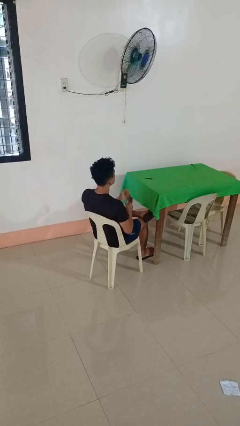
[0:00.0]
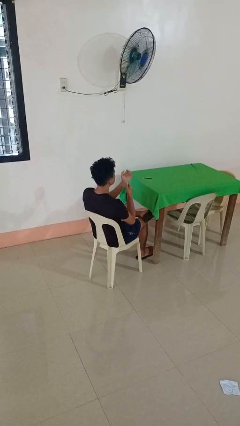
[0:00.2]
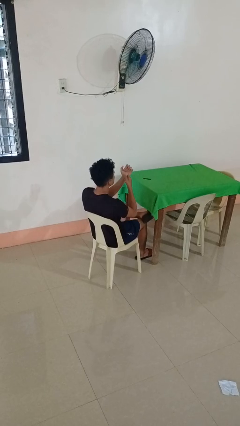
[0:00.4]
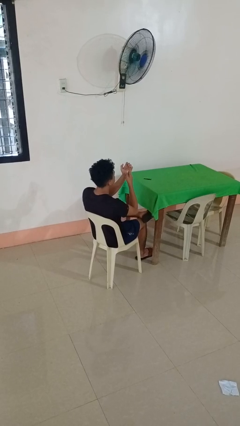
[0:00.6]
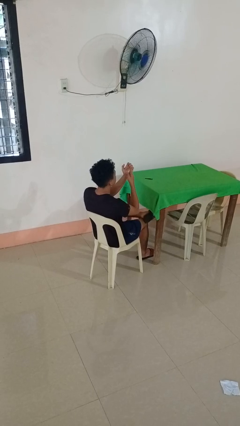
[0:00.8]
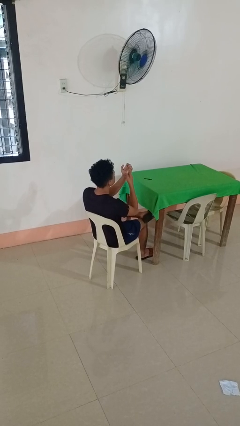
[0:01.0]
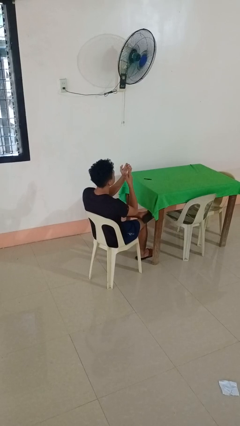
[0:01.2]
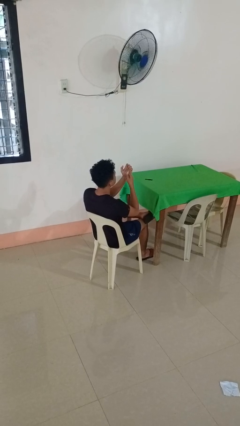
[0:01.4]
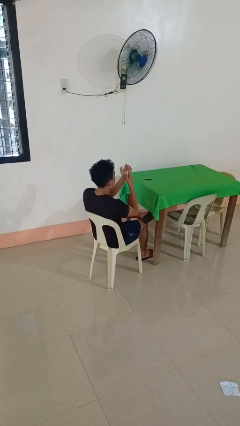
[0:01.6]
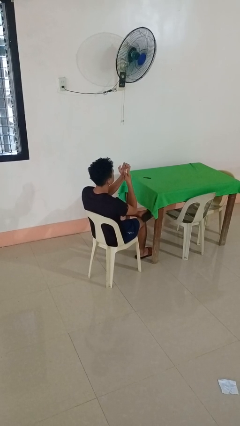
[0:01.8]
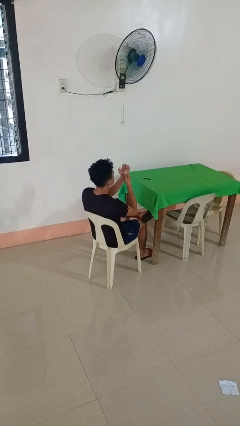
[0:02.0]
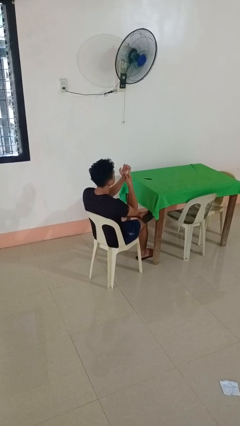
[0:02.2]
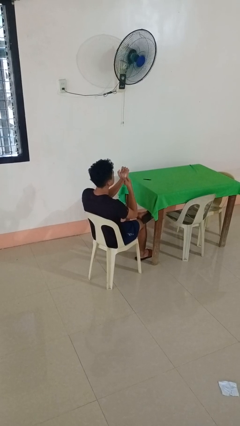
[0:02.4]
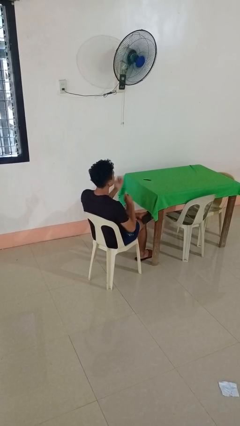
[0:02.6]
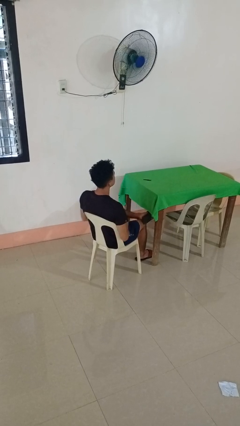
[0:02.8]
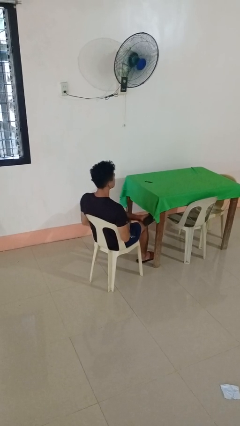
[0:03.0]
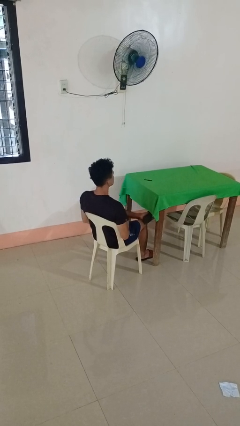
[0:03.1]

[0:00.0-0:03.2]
person clips fingernails

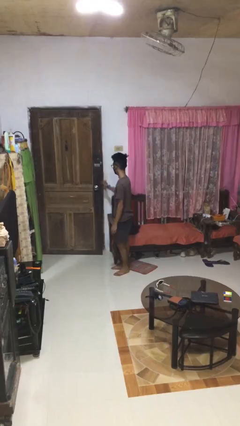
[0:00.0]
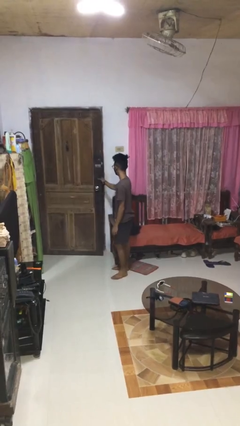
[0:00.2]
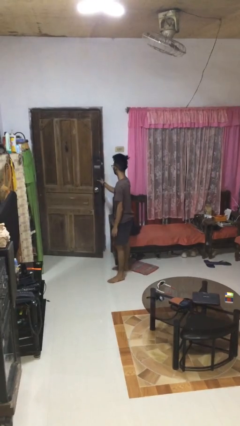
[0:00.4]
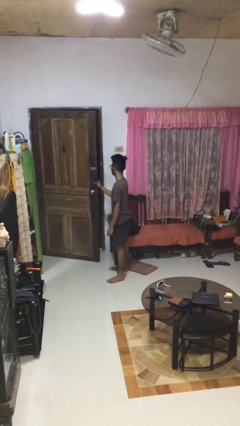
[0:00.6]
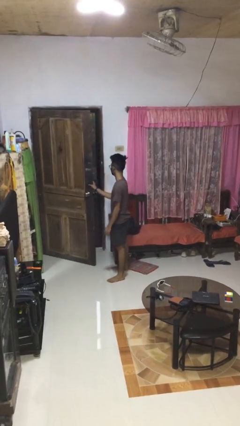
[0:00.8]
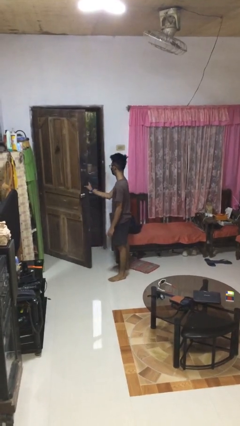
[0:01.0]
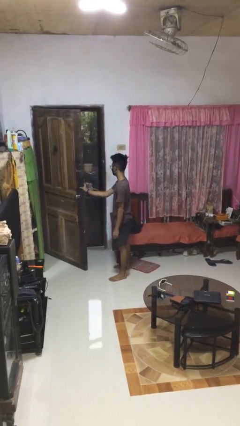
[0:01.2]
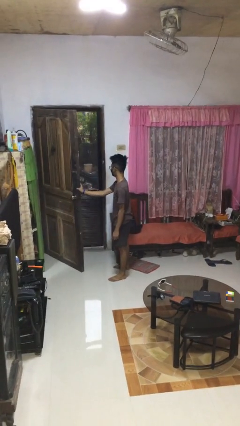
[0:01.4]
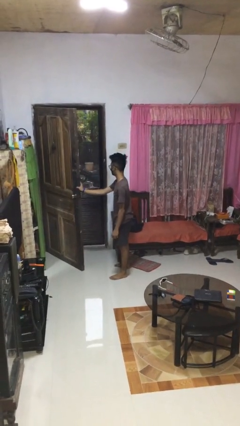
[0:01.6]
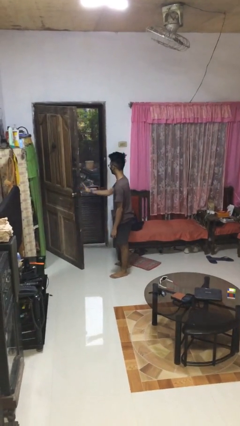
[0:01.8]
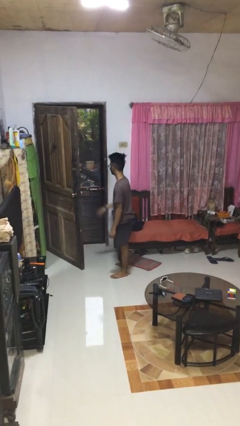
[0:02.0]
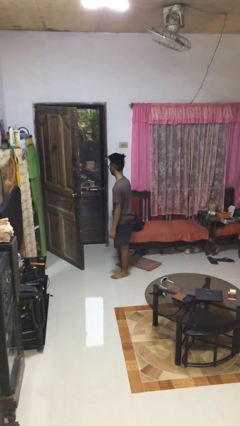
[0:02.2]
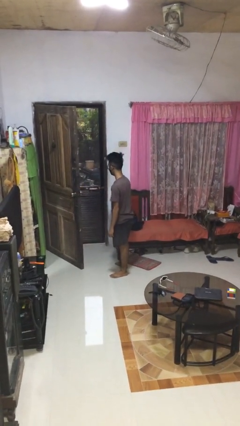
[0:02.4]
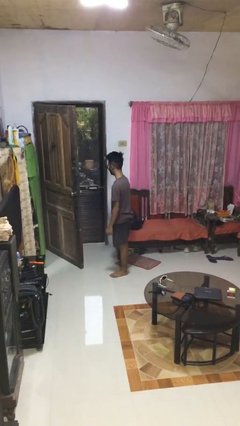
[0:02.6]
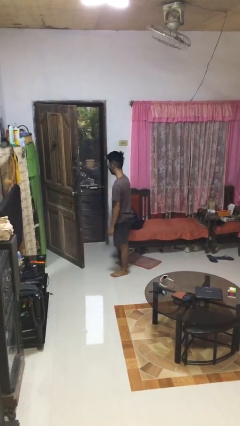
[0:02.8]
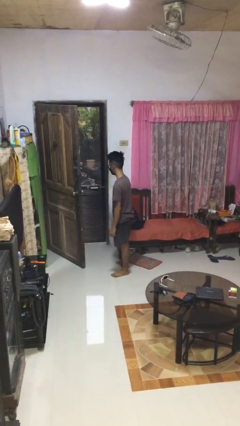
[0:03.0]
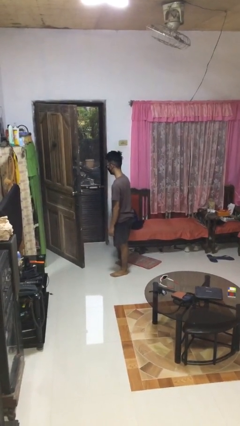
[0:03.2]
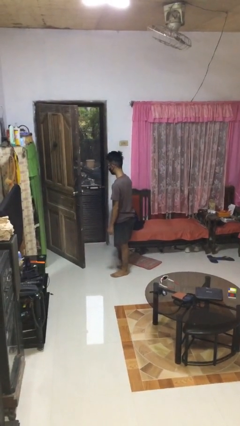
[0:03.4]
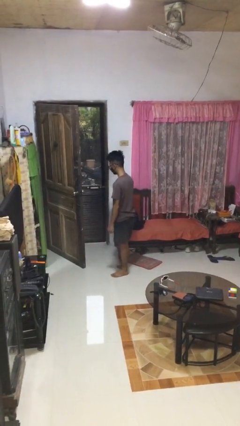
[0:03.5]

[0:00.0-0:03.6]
person opens facility door

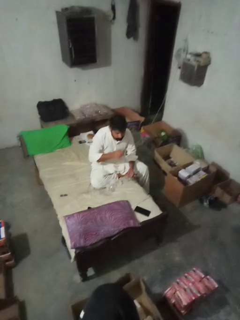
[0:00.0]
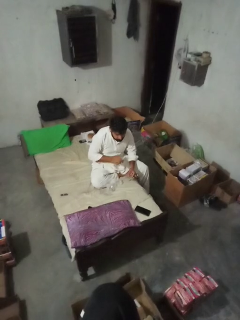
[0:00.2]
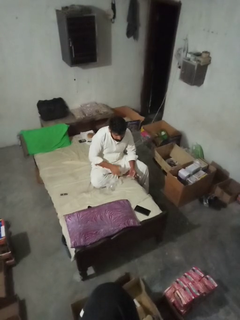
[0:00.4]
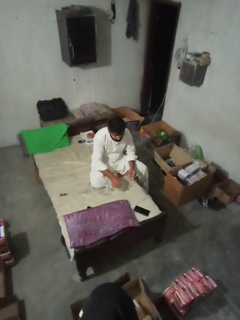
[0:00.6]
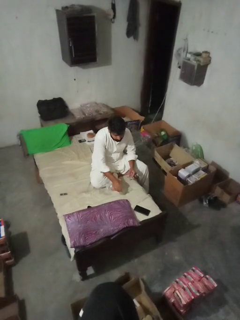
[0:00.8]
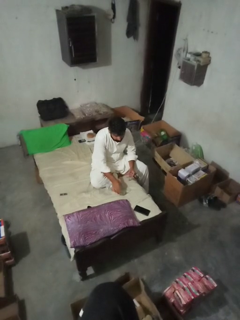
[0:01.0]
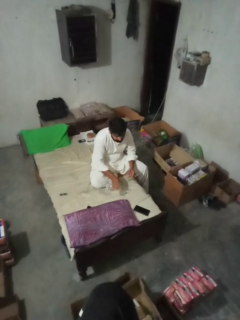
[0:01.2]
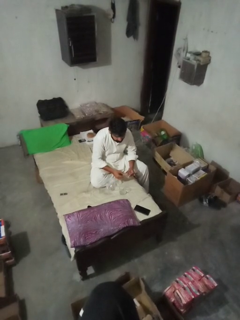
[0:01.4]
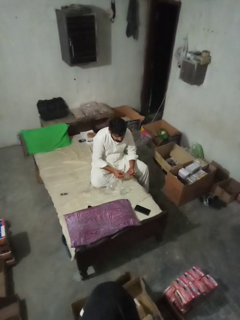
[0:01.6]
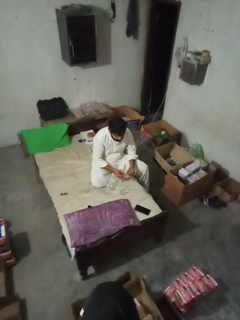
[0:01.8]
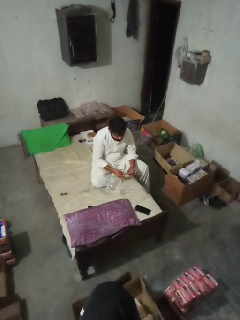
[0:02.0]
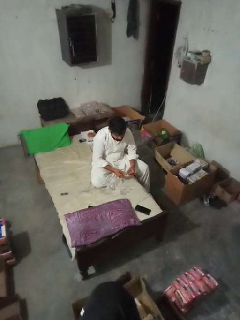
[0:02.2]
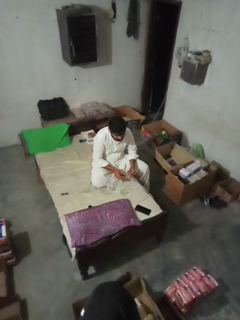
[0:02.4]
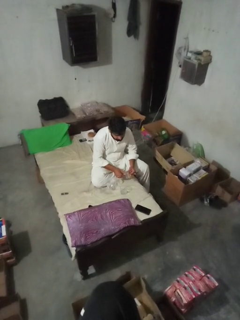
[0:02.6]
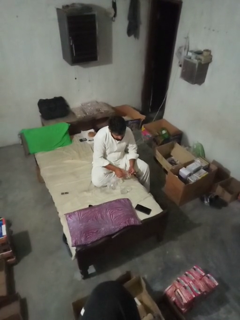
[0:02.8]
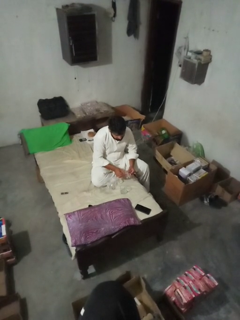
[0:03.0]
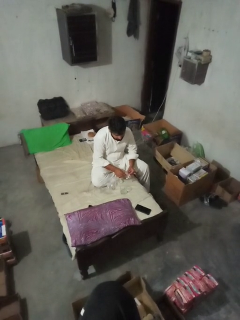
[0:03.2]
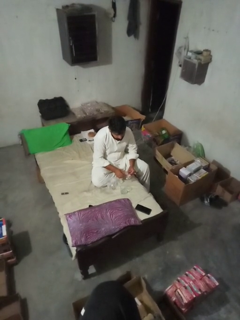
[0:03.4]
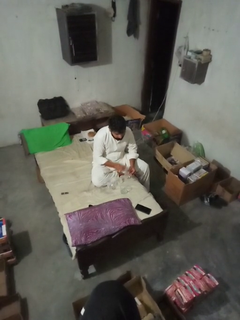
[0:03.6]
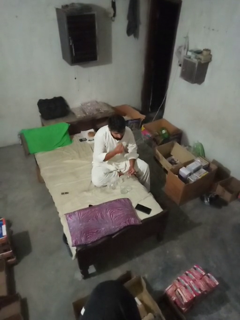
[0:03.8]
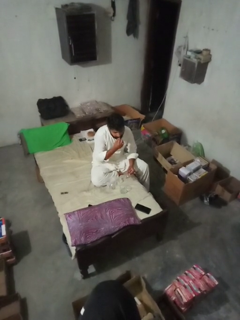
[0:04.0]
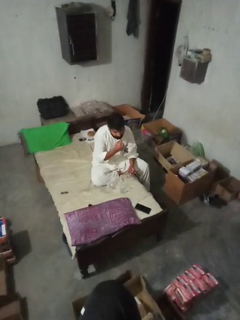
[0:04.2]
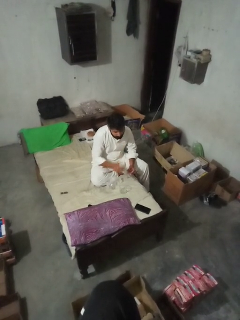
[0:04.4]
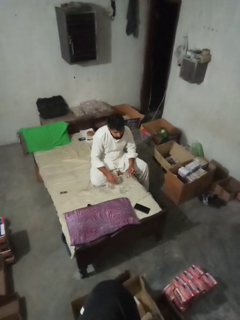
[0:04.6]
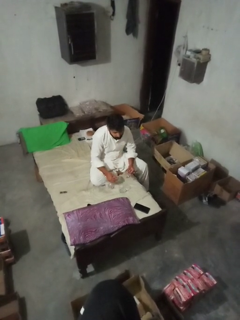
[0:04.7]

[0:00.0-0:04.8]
person takes medicine pills

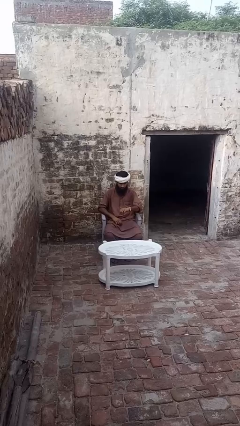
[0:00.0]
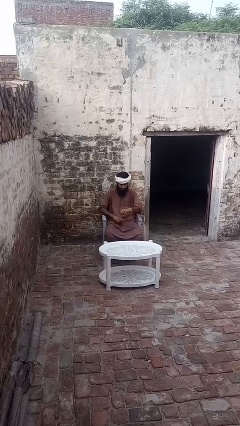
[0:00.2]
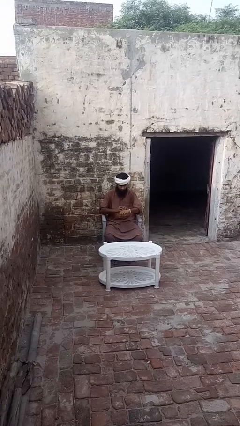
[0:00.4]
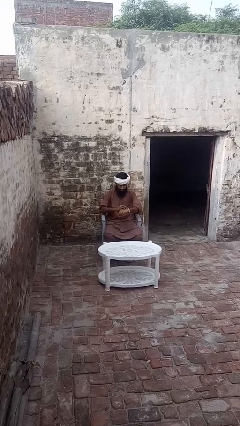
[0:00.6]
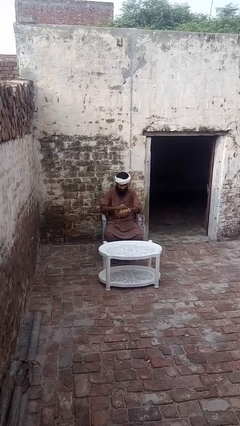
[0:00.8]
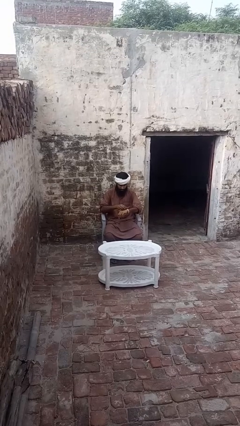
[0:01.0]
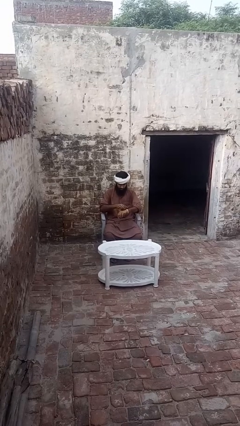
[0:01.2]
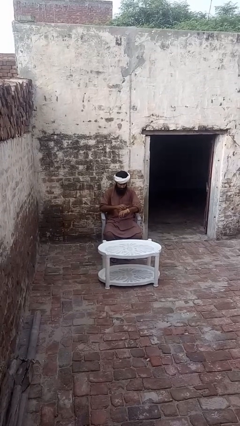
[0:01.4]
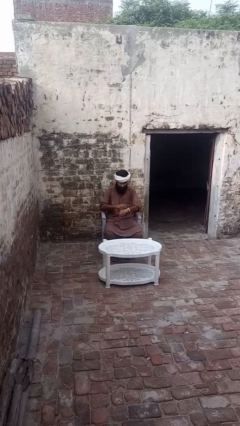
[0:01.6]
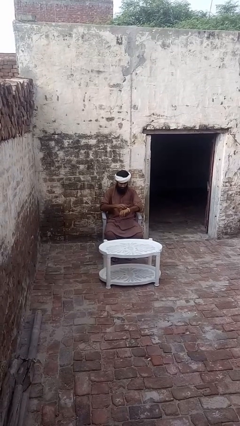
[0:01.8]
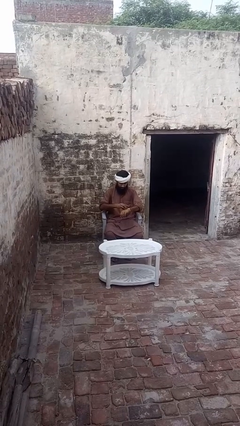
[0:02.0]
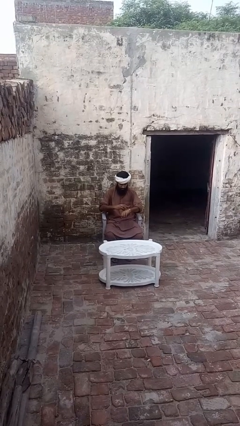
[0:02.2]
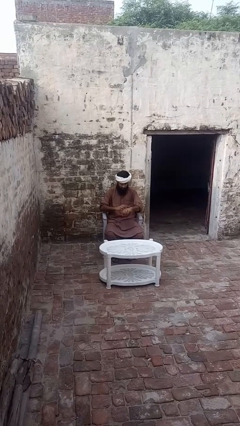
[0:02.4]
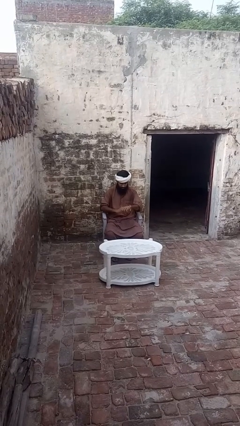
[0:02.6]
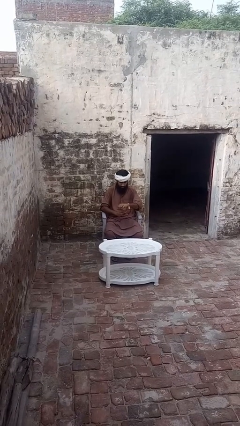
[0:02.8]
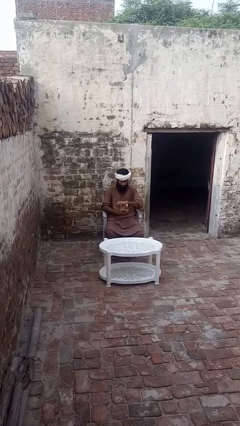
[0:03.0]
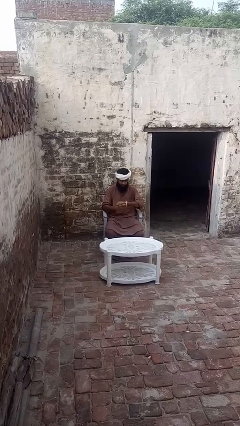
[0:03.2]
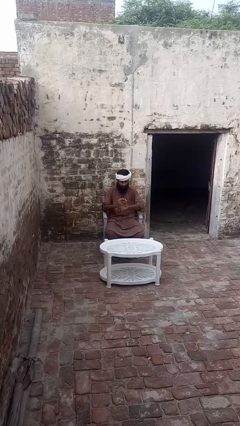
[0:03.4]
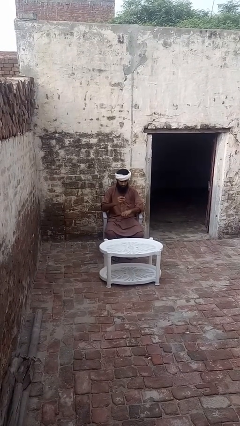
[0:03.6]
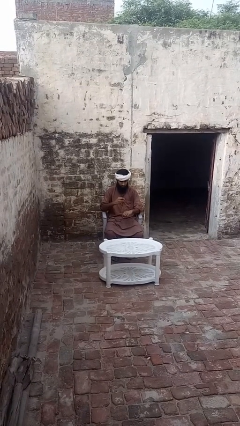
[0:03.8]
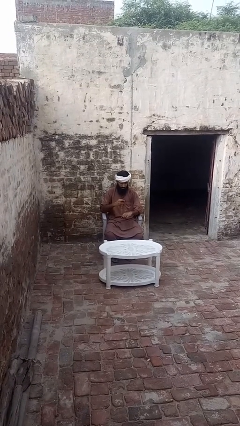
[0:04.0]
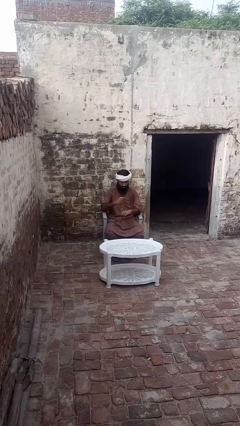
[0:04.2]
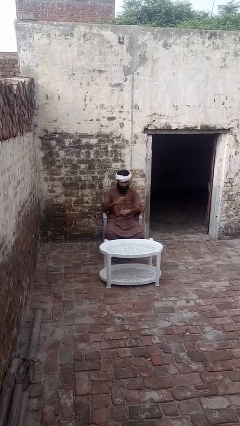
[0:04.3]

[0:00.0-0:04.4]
person takes off wristwatch

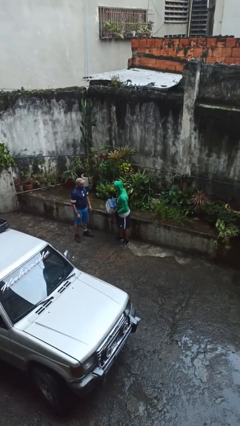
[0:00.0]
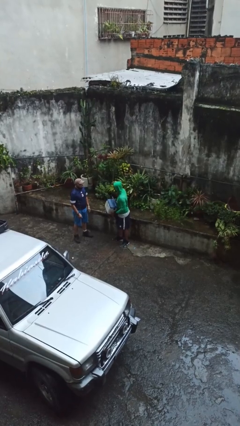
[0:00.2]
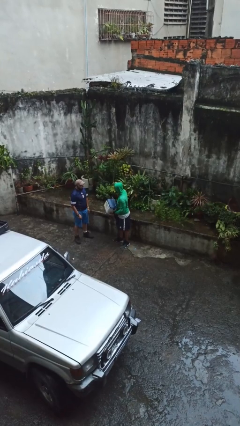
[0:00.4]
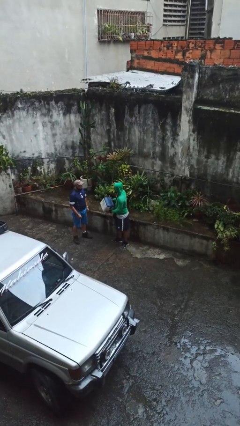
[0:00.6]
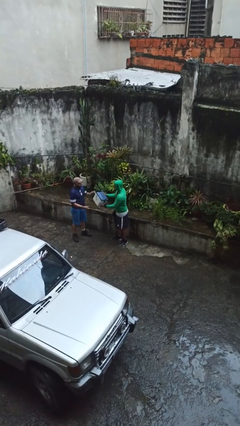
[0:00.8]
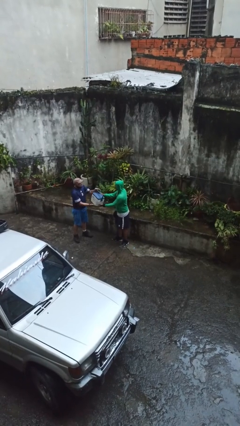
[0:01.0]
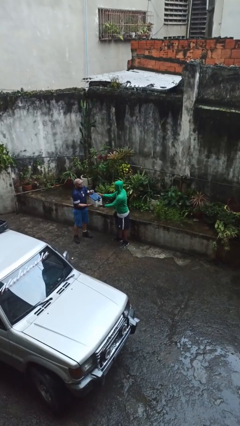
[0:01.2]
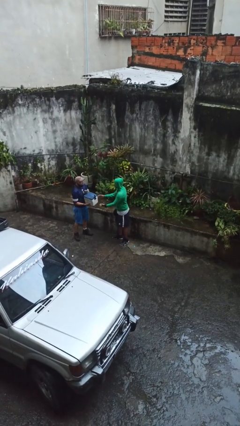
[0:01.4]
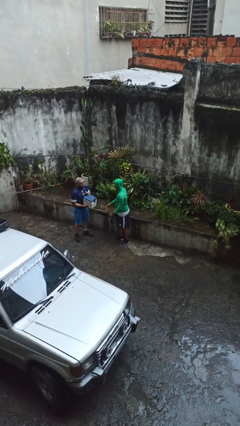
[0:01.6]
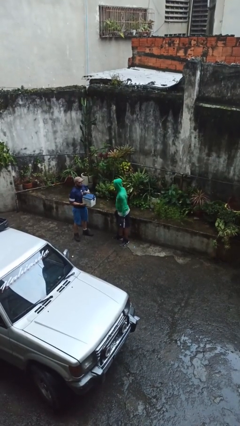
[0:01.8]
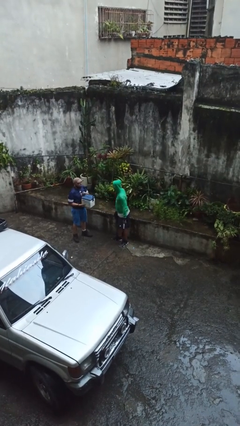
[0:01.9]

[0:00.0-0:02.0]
person transfers object to person

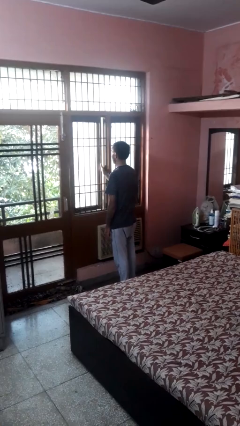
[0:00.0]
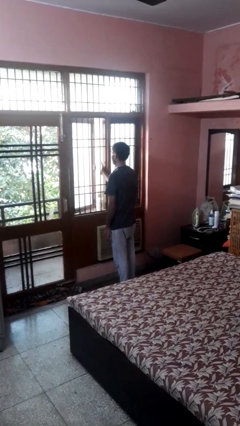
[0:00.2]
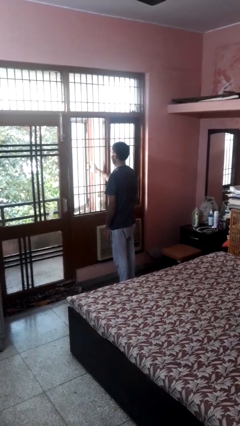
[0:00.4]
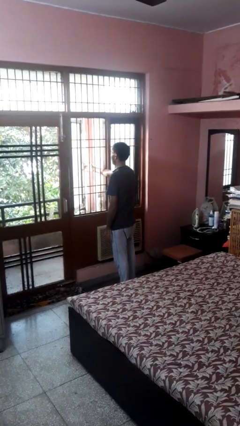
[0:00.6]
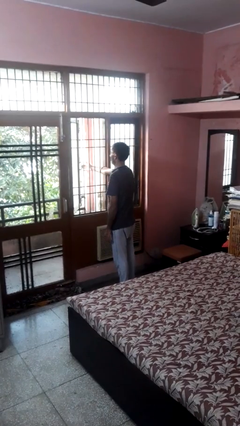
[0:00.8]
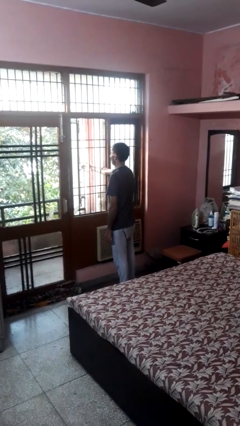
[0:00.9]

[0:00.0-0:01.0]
person opens home window
